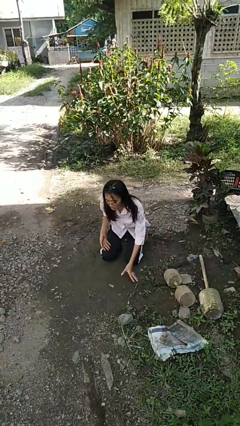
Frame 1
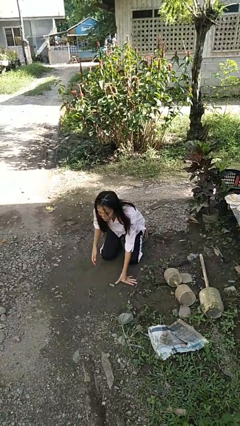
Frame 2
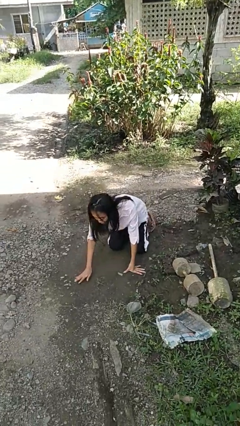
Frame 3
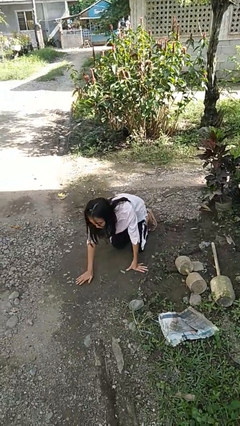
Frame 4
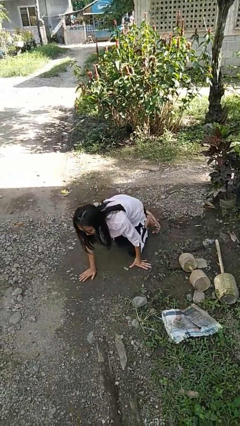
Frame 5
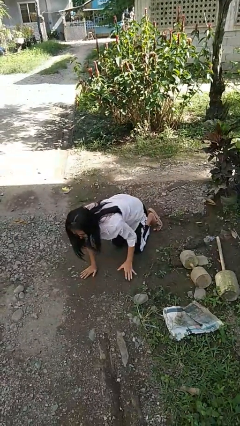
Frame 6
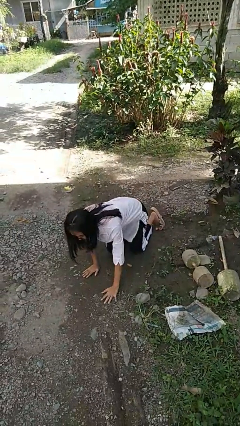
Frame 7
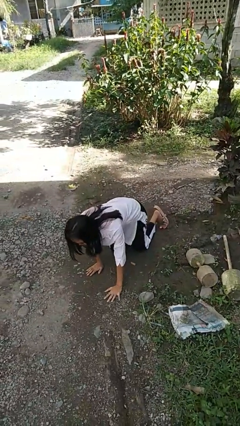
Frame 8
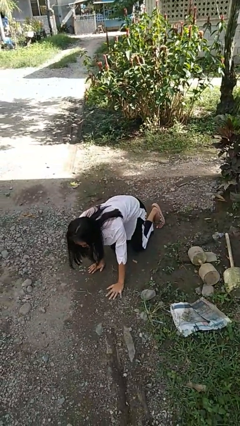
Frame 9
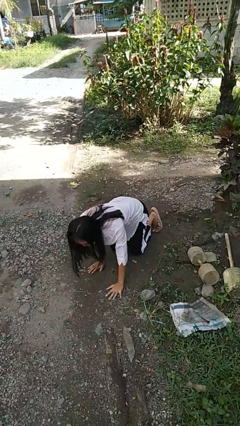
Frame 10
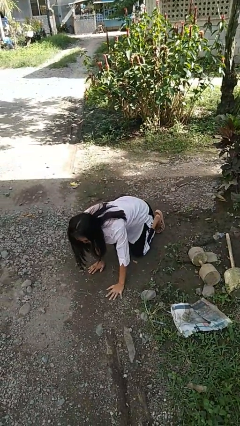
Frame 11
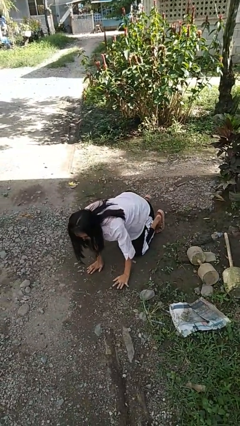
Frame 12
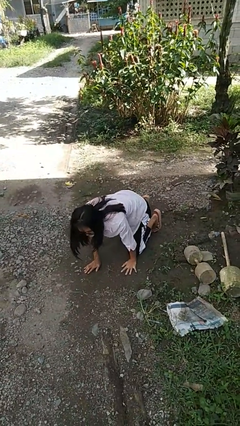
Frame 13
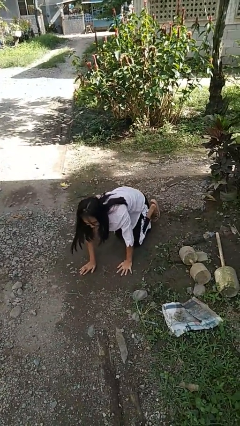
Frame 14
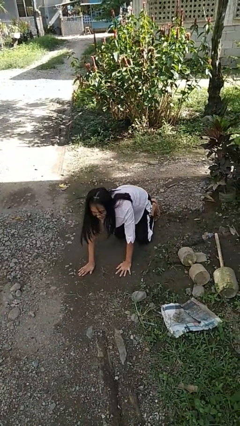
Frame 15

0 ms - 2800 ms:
person crawls

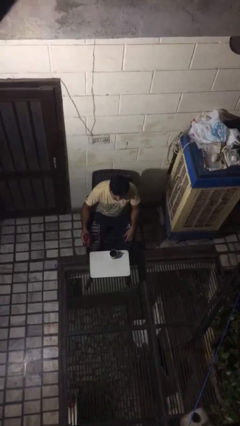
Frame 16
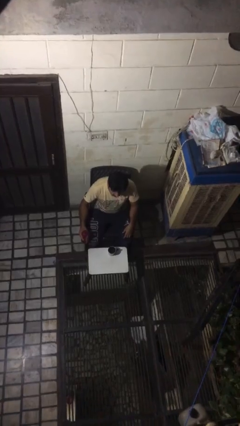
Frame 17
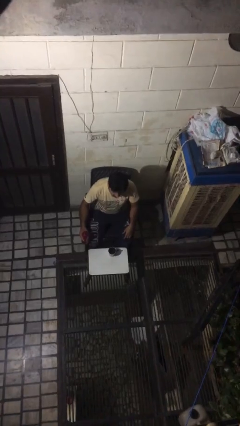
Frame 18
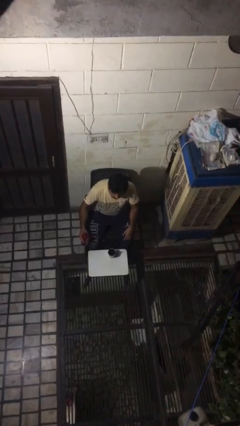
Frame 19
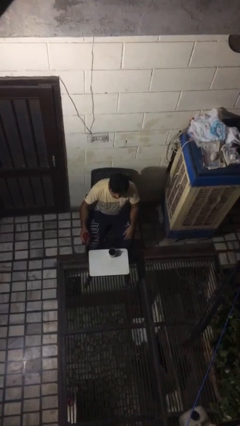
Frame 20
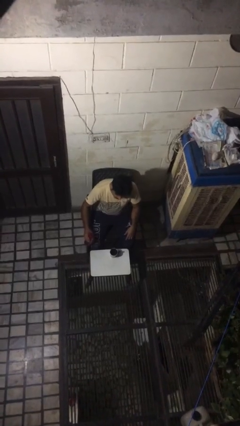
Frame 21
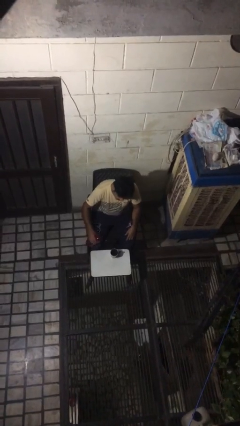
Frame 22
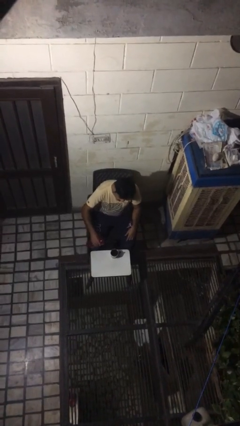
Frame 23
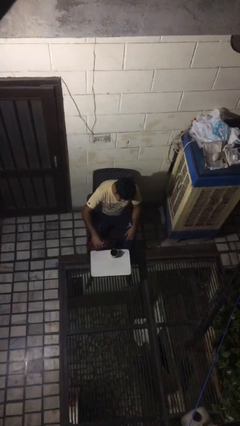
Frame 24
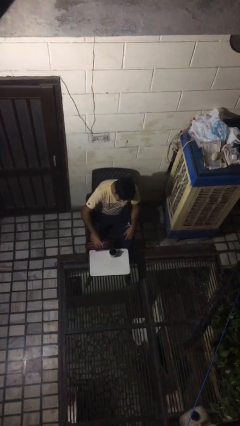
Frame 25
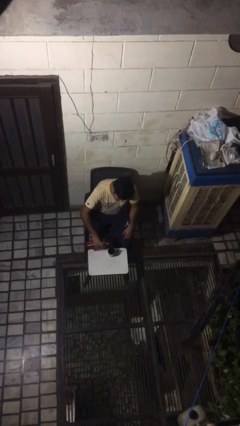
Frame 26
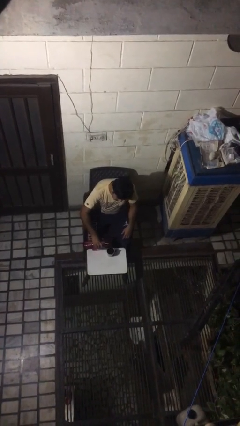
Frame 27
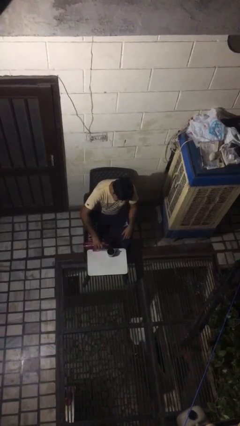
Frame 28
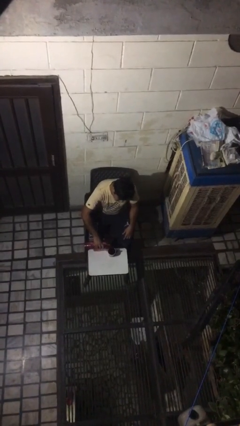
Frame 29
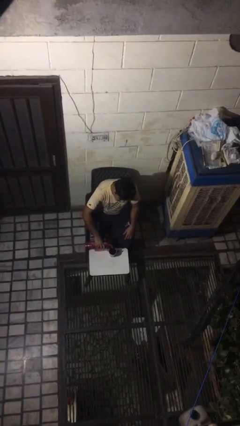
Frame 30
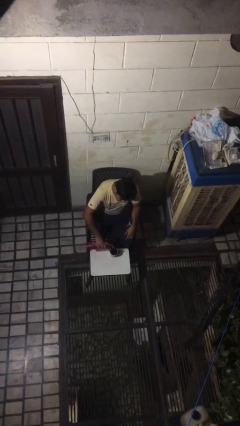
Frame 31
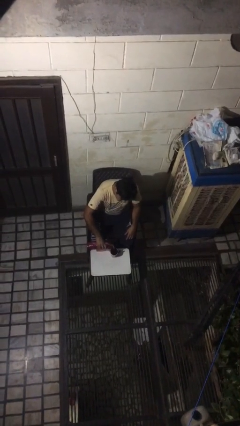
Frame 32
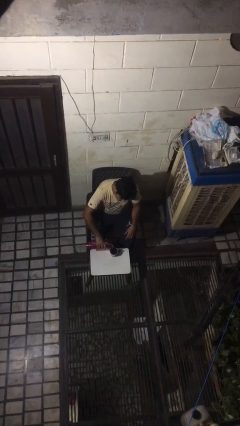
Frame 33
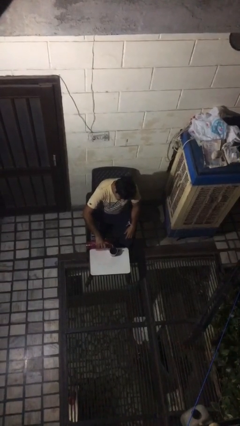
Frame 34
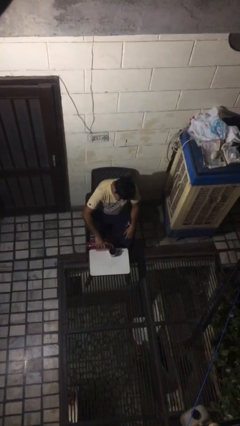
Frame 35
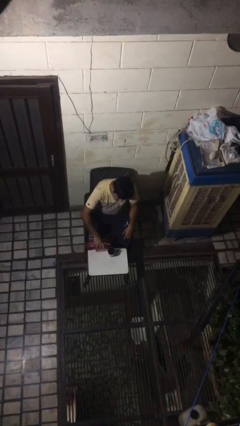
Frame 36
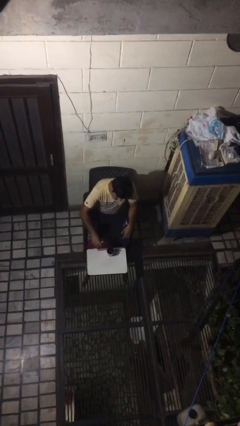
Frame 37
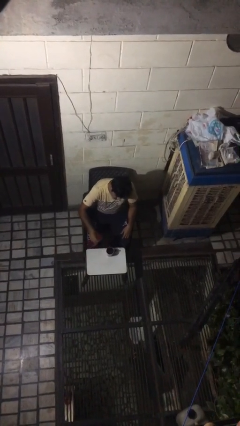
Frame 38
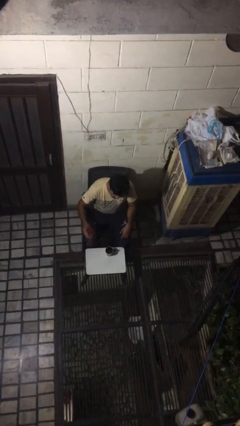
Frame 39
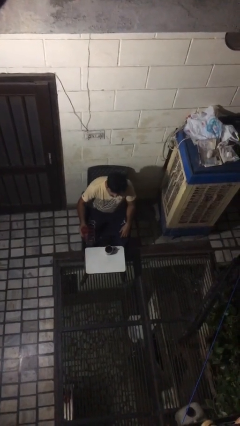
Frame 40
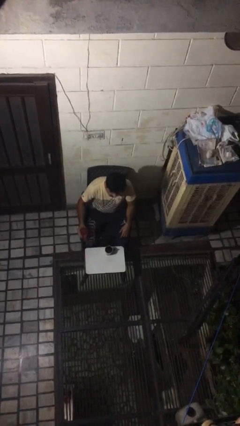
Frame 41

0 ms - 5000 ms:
person pours liquid into cup

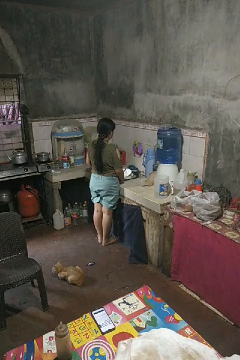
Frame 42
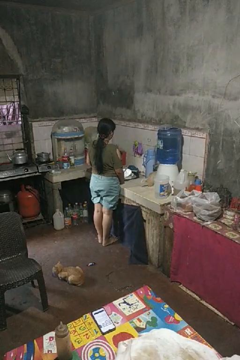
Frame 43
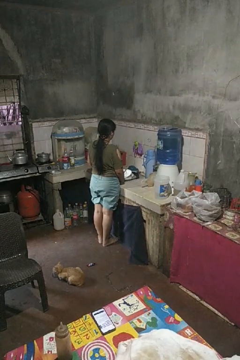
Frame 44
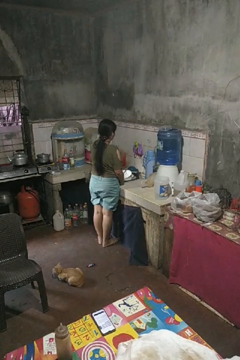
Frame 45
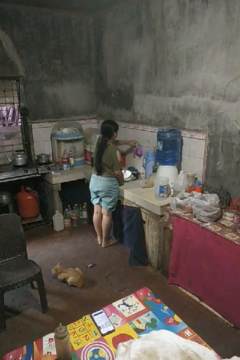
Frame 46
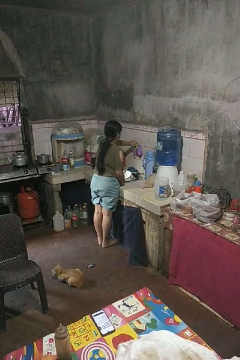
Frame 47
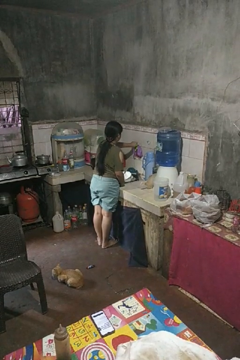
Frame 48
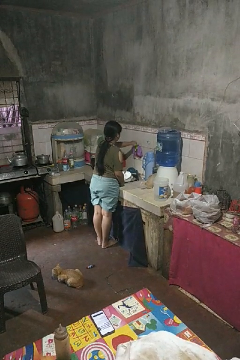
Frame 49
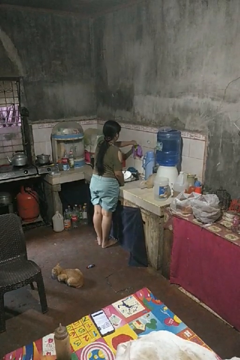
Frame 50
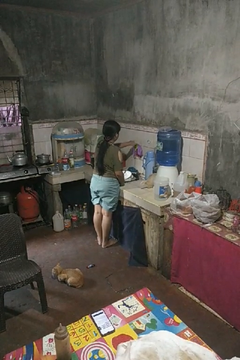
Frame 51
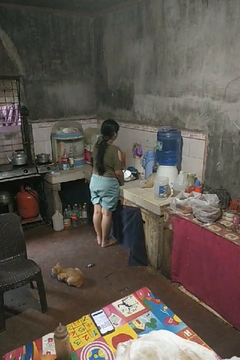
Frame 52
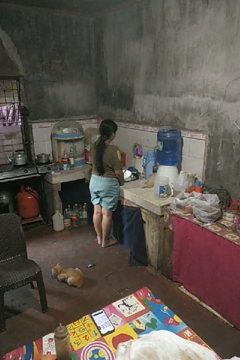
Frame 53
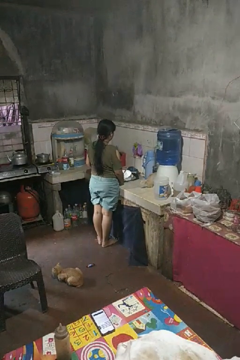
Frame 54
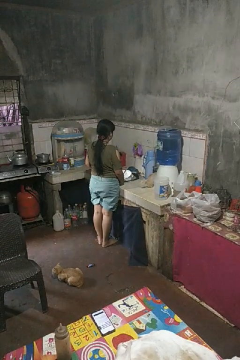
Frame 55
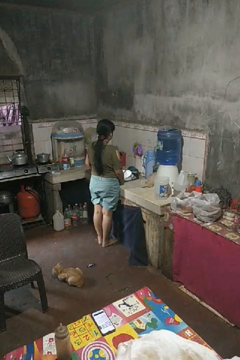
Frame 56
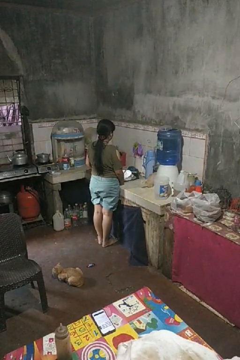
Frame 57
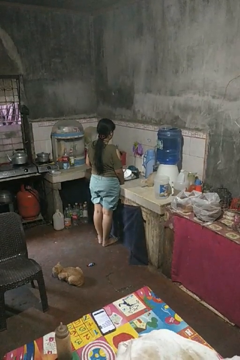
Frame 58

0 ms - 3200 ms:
person turns on faucet

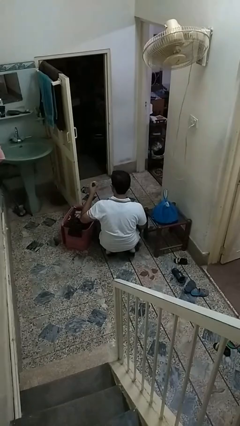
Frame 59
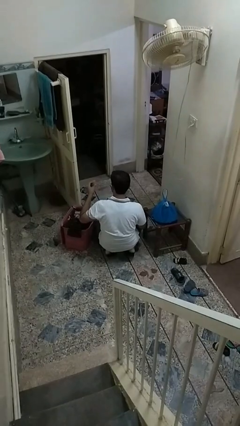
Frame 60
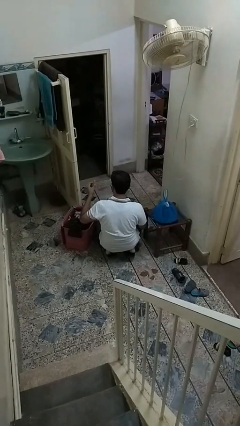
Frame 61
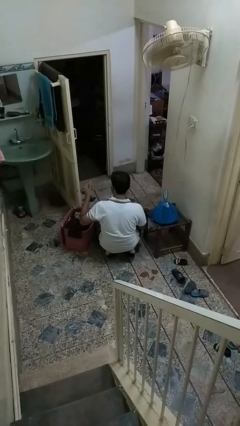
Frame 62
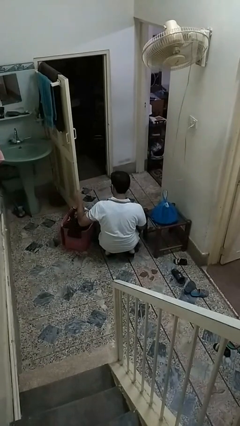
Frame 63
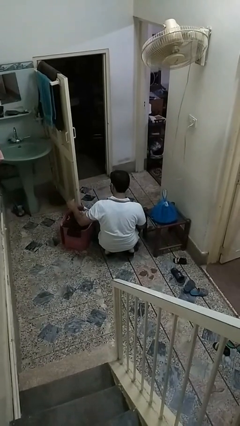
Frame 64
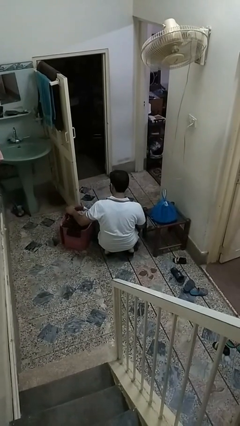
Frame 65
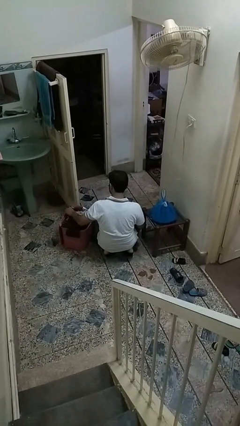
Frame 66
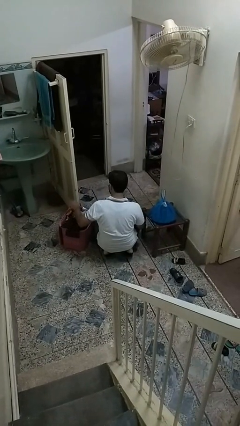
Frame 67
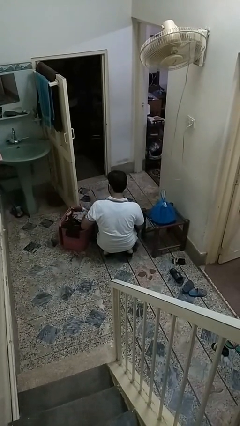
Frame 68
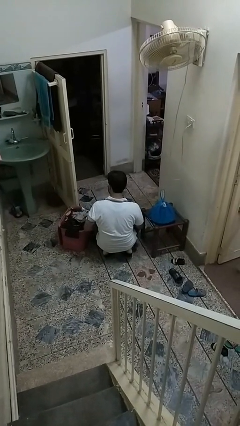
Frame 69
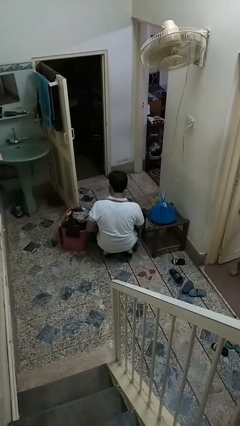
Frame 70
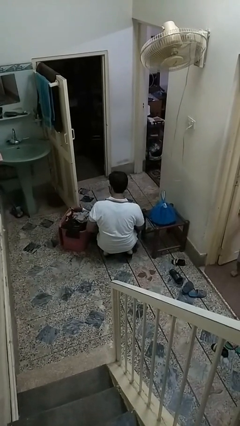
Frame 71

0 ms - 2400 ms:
person puts object into basket

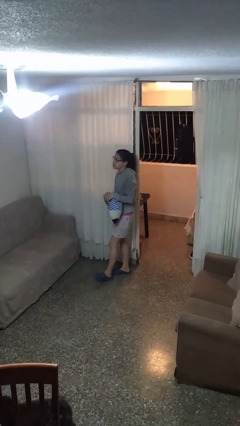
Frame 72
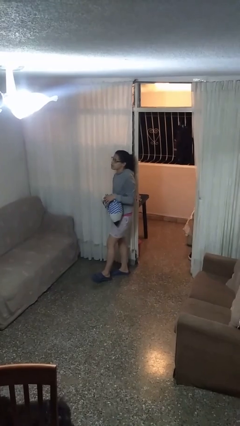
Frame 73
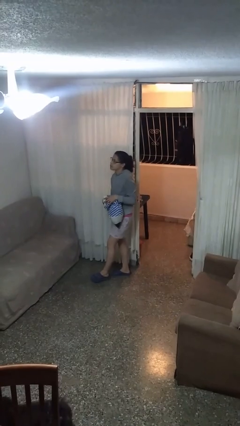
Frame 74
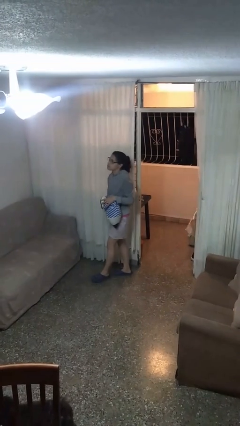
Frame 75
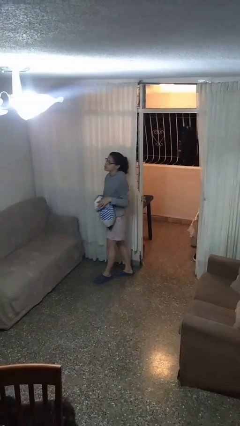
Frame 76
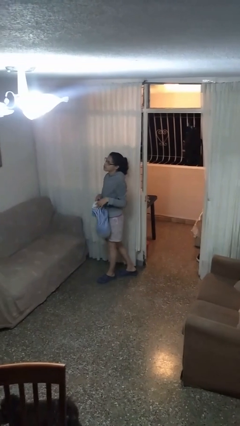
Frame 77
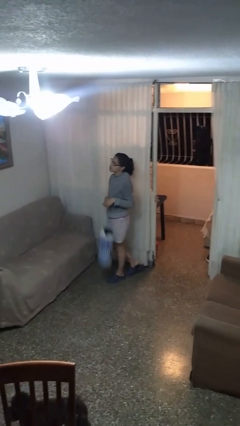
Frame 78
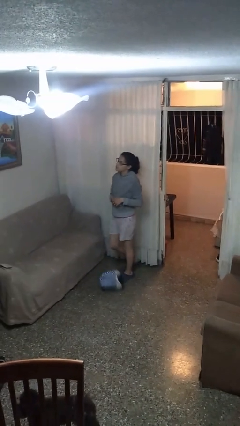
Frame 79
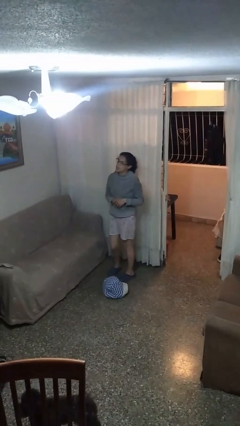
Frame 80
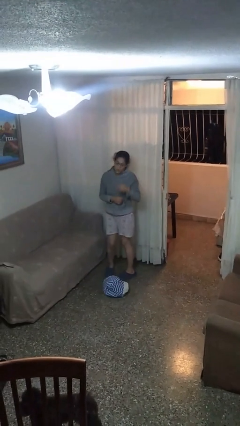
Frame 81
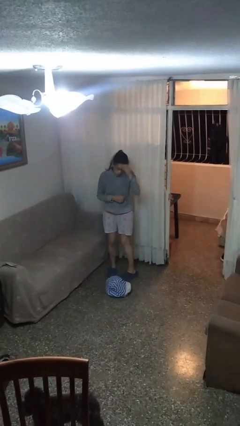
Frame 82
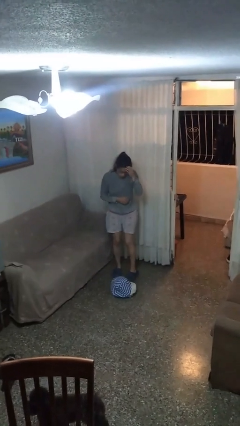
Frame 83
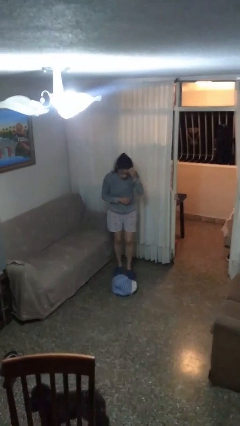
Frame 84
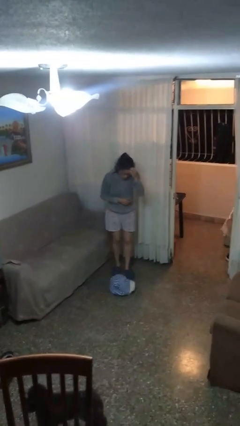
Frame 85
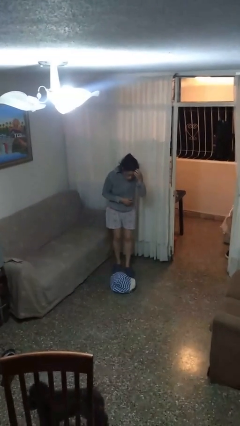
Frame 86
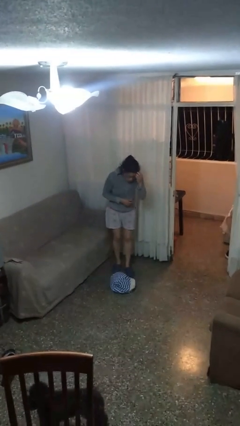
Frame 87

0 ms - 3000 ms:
person drops object

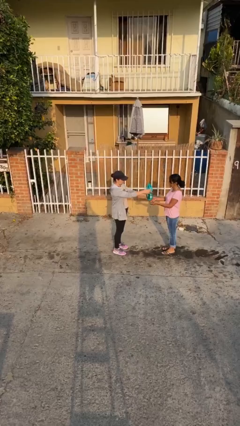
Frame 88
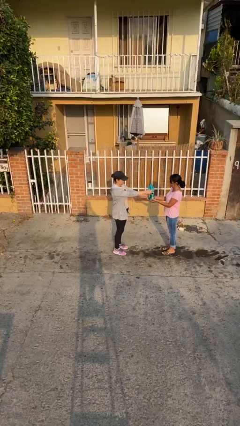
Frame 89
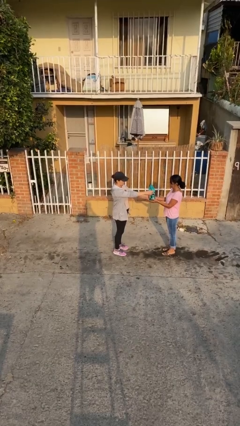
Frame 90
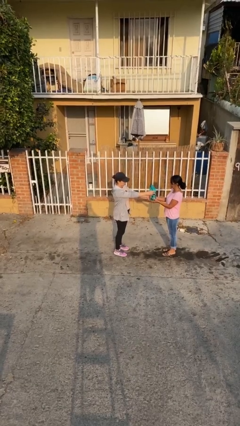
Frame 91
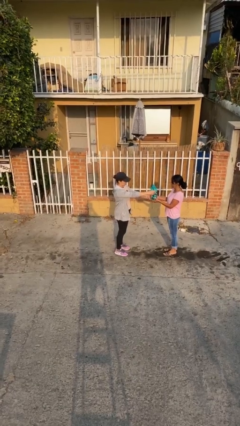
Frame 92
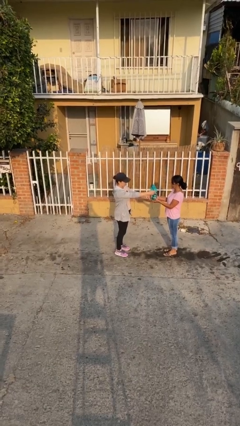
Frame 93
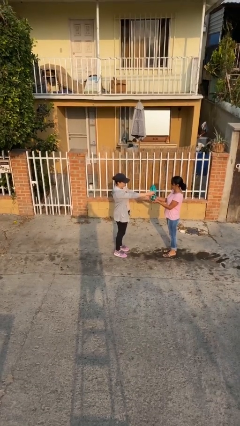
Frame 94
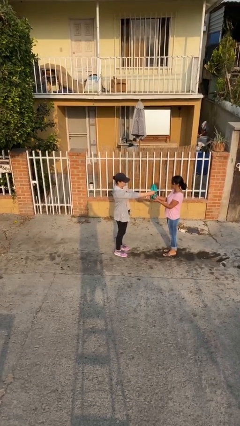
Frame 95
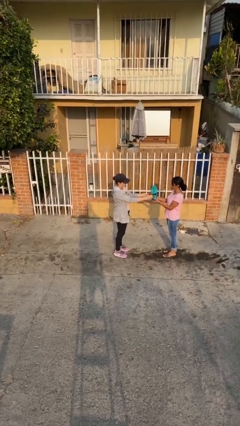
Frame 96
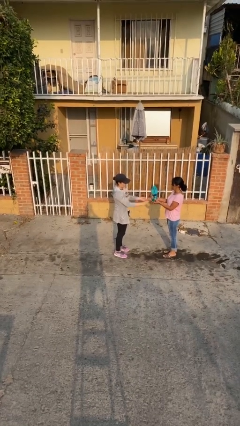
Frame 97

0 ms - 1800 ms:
person transfers object to person
